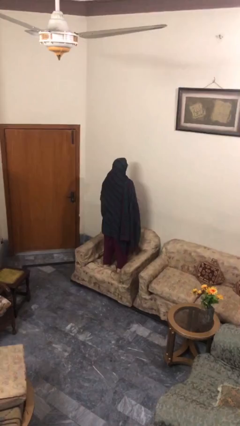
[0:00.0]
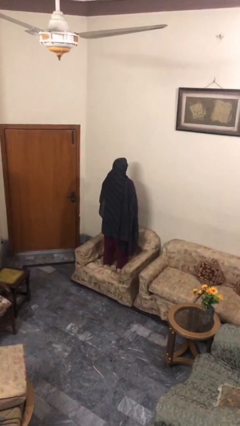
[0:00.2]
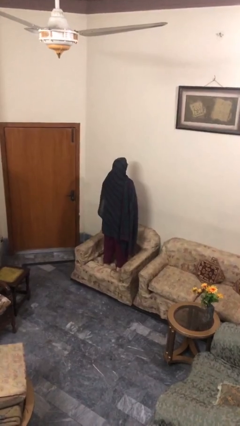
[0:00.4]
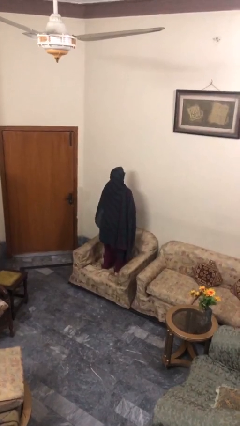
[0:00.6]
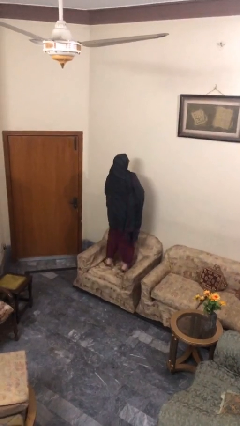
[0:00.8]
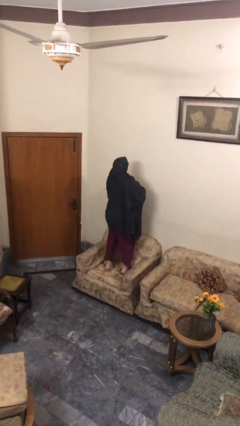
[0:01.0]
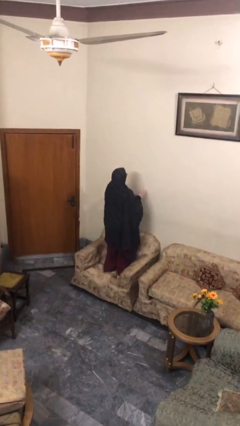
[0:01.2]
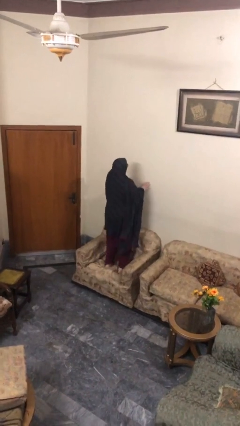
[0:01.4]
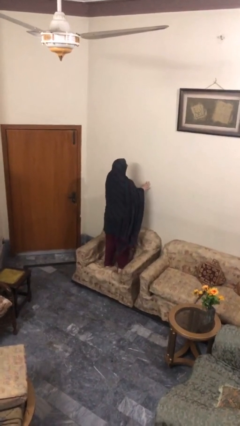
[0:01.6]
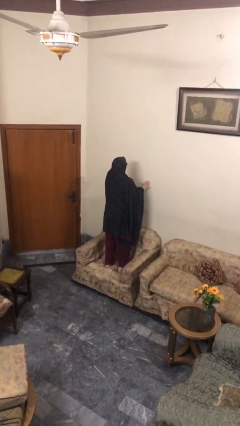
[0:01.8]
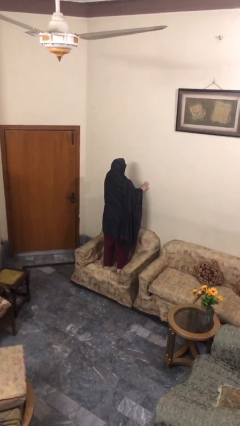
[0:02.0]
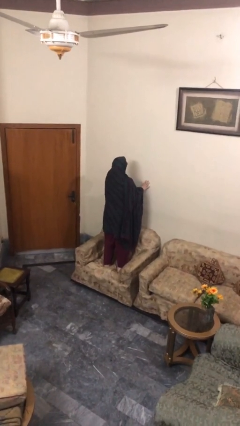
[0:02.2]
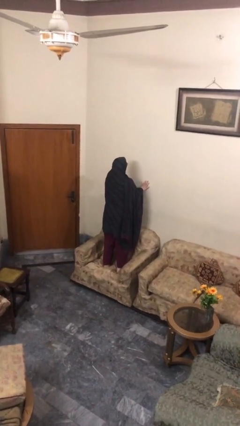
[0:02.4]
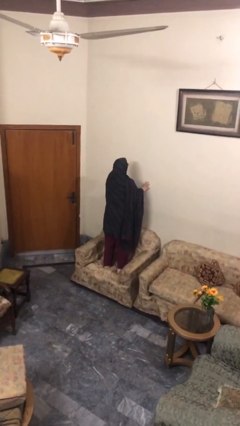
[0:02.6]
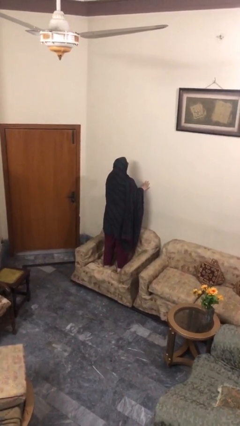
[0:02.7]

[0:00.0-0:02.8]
person jumps on couch

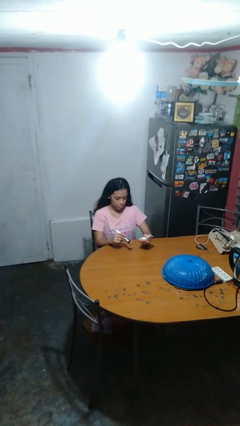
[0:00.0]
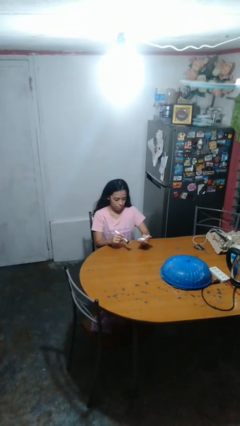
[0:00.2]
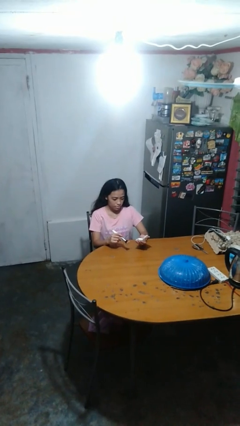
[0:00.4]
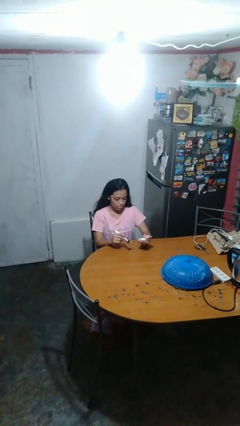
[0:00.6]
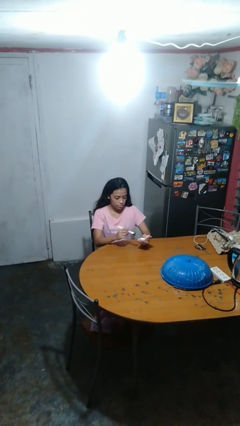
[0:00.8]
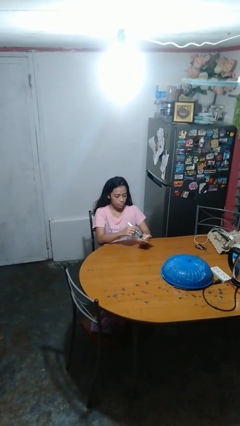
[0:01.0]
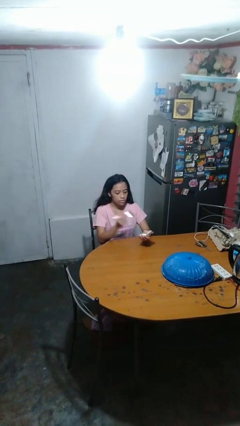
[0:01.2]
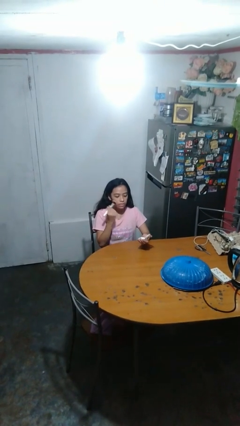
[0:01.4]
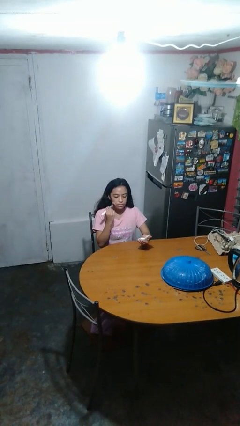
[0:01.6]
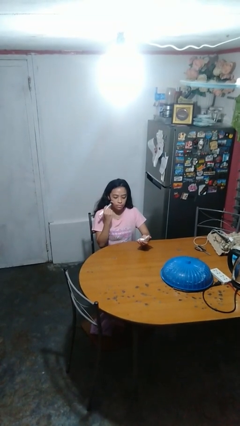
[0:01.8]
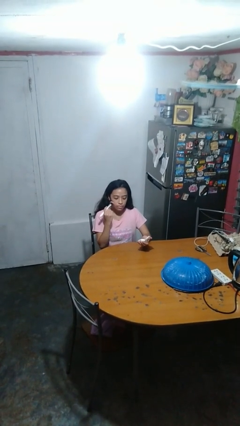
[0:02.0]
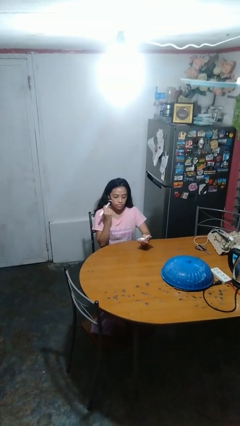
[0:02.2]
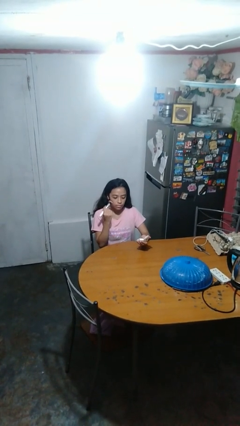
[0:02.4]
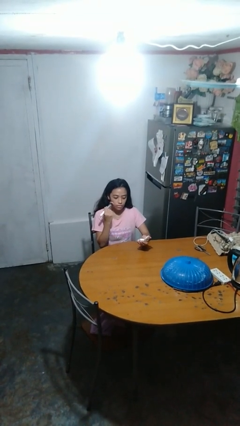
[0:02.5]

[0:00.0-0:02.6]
person applies foundation makeup

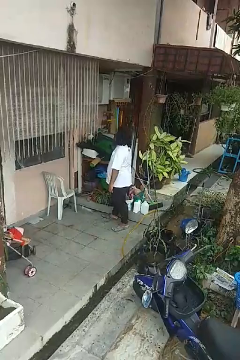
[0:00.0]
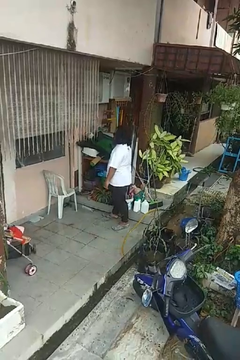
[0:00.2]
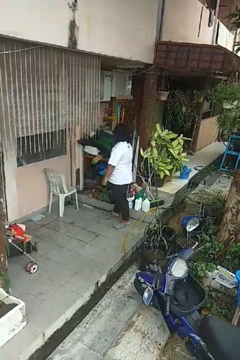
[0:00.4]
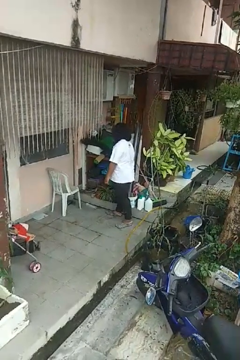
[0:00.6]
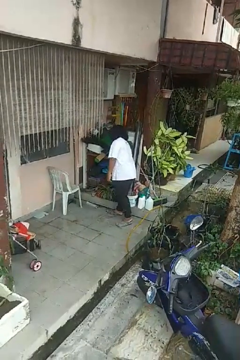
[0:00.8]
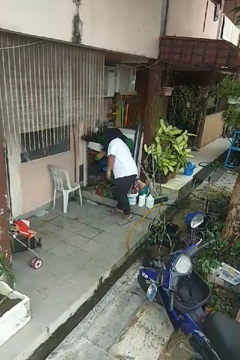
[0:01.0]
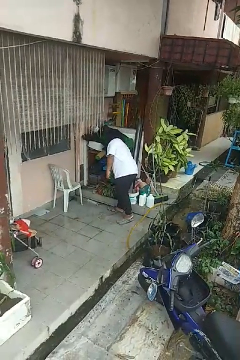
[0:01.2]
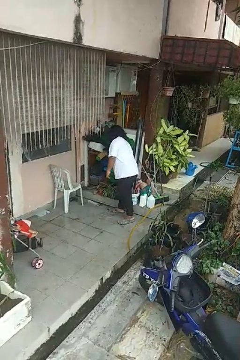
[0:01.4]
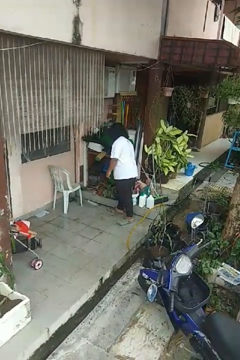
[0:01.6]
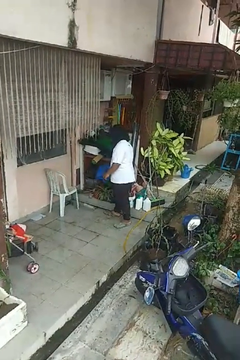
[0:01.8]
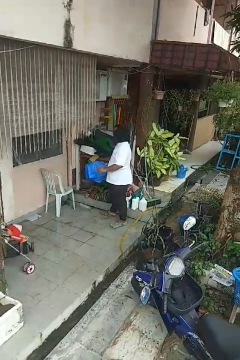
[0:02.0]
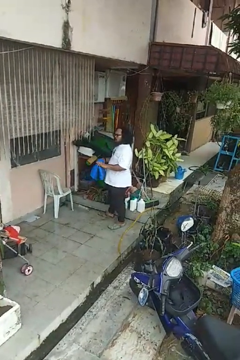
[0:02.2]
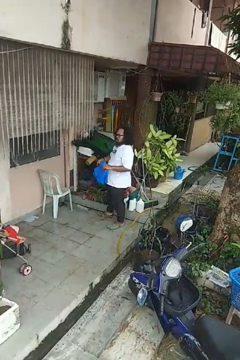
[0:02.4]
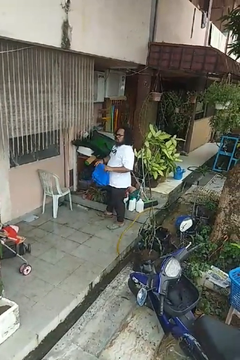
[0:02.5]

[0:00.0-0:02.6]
person picks up object from cabinet

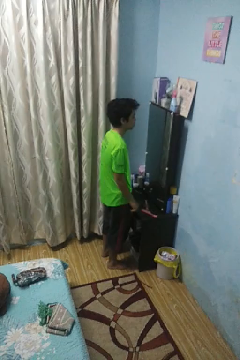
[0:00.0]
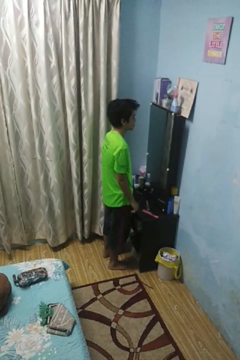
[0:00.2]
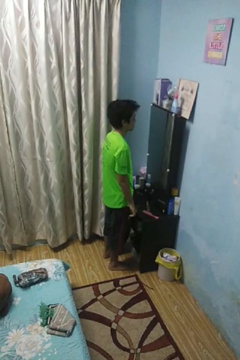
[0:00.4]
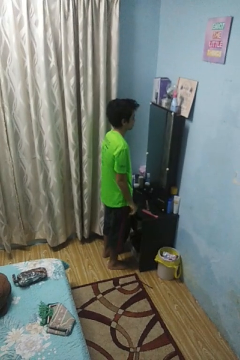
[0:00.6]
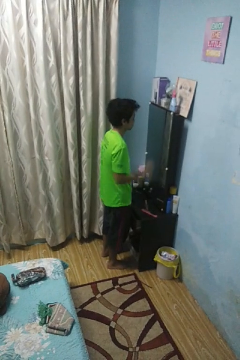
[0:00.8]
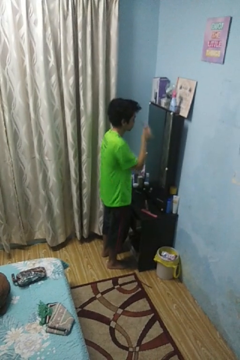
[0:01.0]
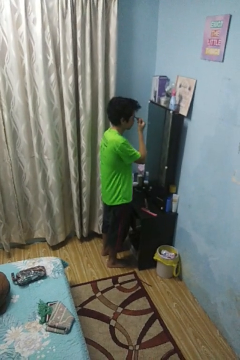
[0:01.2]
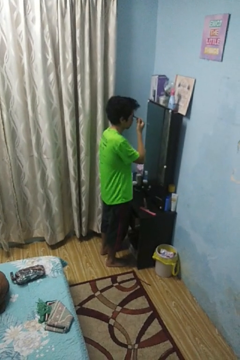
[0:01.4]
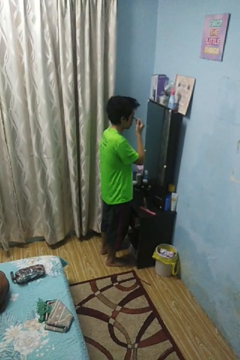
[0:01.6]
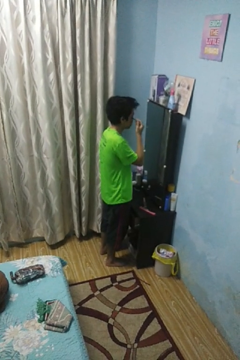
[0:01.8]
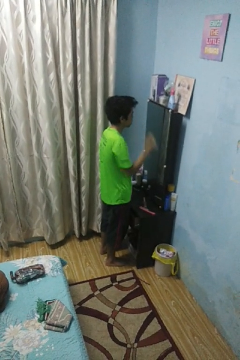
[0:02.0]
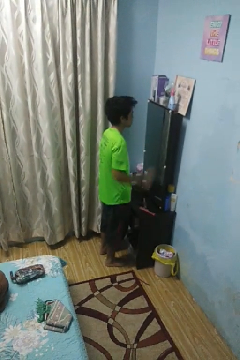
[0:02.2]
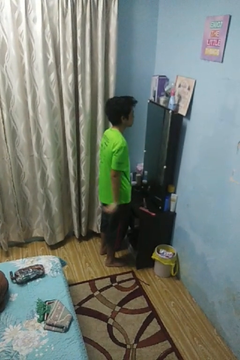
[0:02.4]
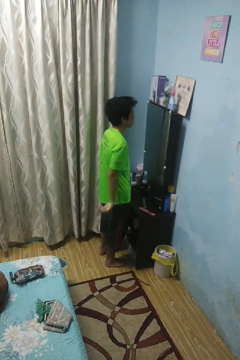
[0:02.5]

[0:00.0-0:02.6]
person applies eye makeup

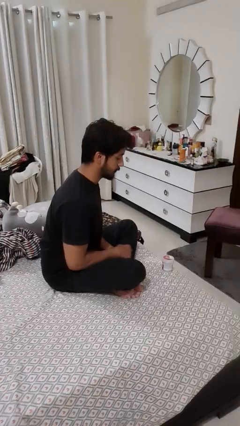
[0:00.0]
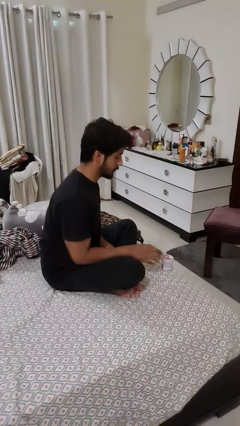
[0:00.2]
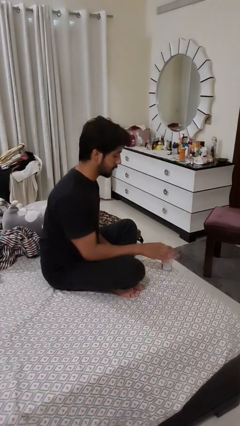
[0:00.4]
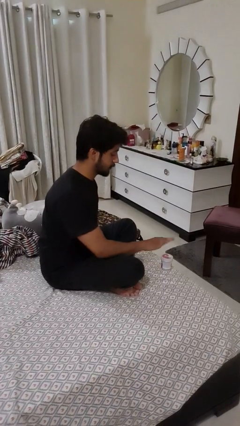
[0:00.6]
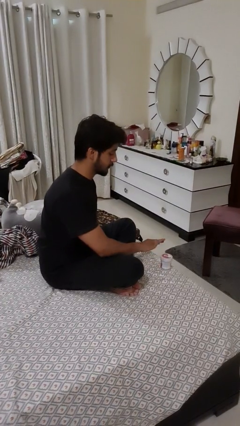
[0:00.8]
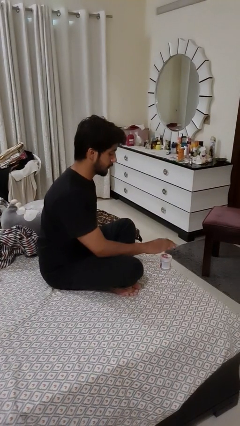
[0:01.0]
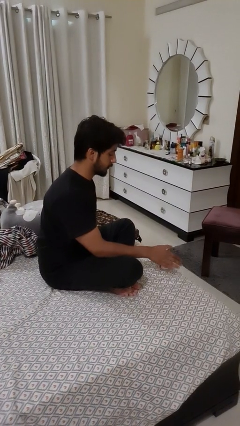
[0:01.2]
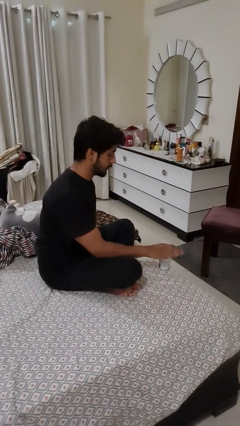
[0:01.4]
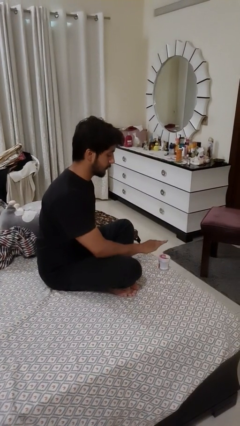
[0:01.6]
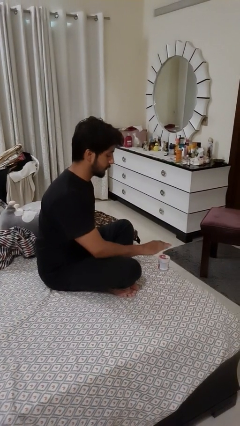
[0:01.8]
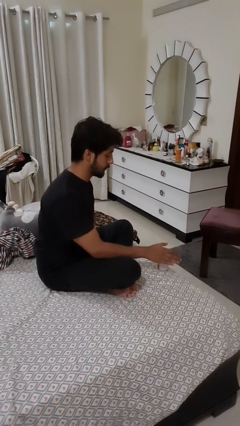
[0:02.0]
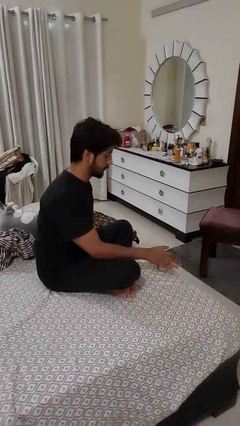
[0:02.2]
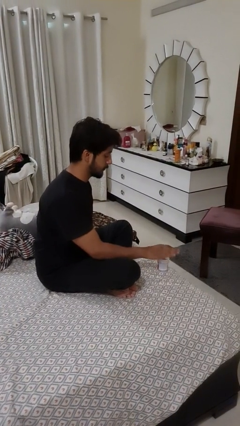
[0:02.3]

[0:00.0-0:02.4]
person waves hand over object

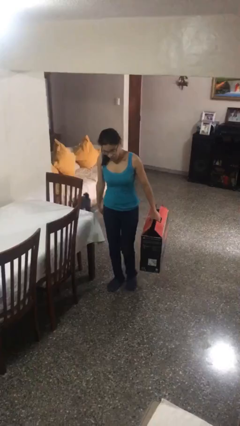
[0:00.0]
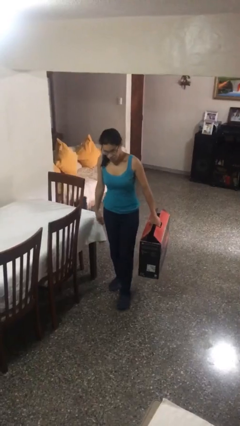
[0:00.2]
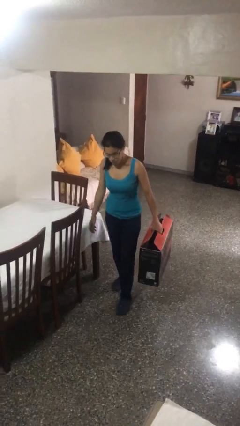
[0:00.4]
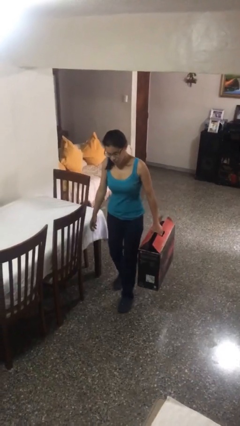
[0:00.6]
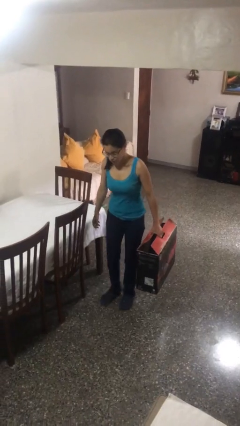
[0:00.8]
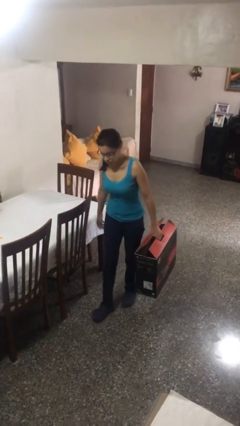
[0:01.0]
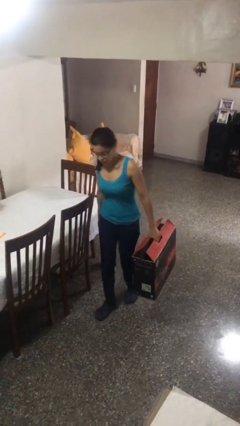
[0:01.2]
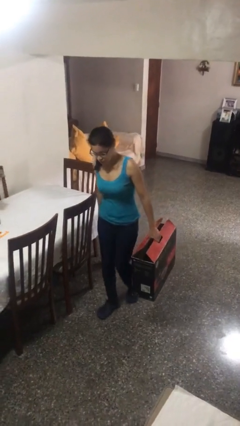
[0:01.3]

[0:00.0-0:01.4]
person carries heavy object

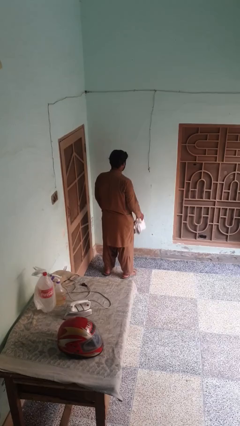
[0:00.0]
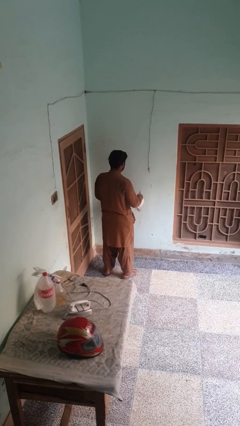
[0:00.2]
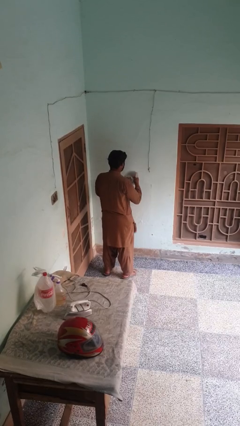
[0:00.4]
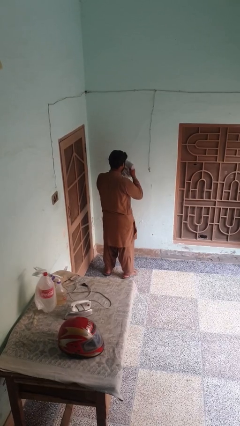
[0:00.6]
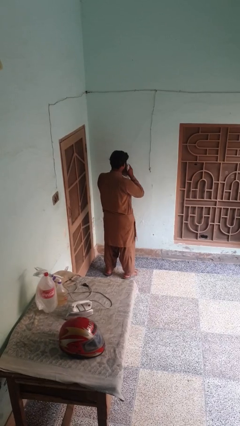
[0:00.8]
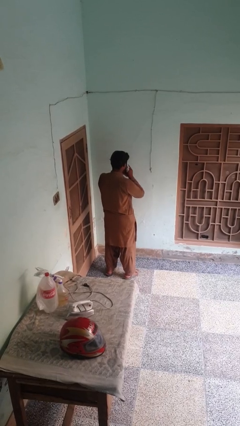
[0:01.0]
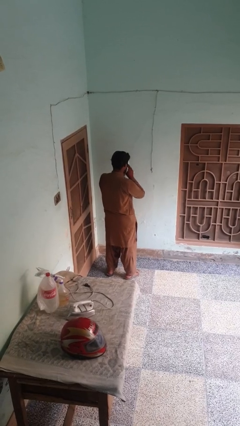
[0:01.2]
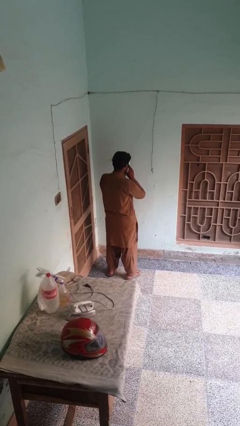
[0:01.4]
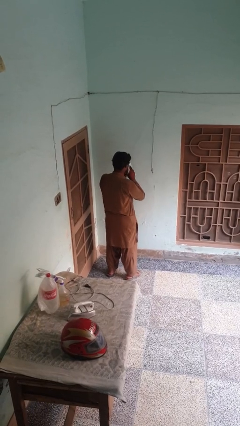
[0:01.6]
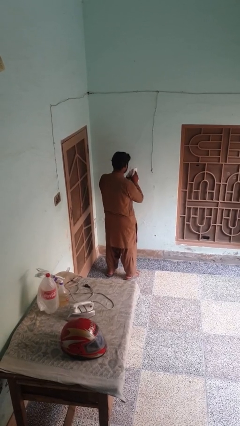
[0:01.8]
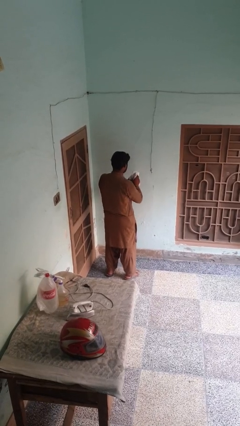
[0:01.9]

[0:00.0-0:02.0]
person blows nose

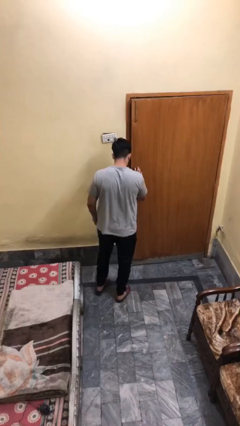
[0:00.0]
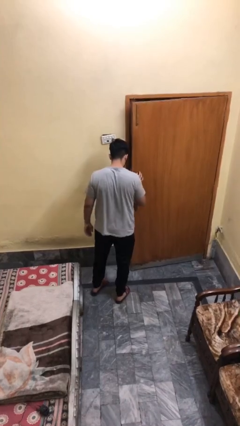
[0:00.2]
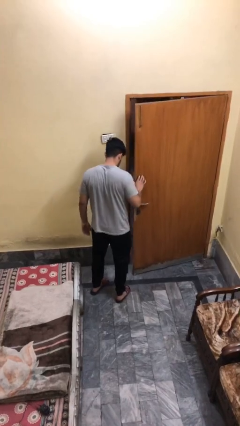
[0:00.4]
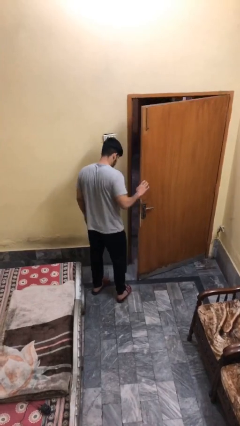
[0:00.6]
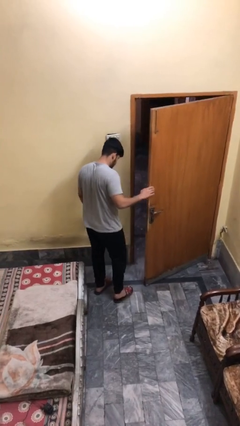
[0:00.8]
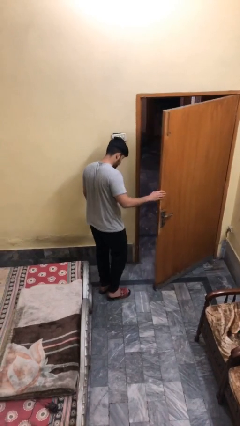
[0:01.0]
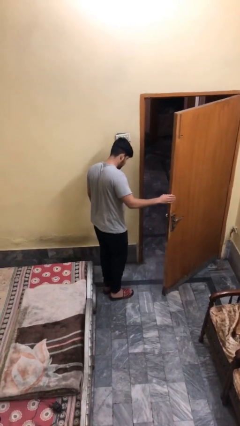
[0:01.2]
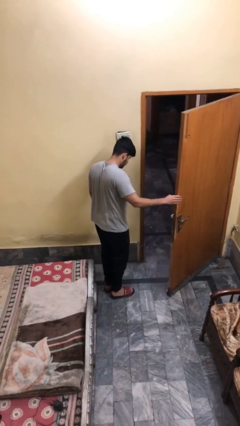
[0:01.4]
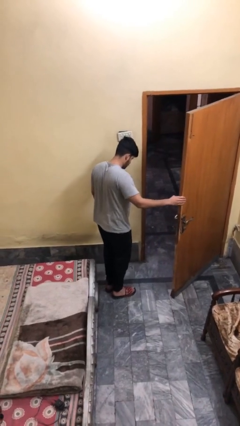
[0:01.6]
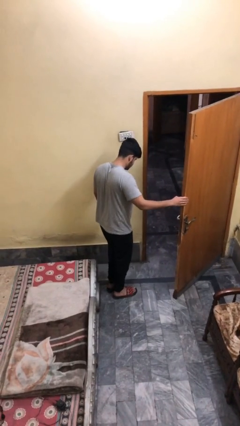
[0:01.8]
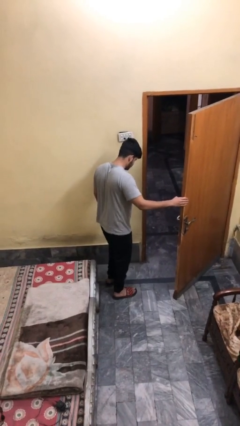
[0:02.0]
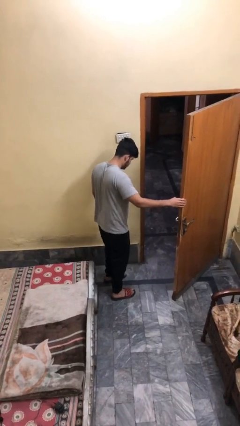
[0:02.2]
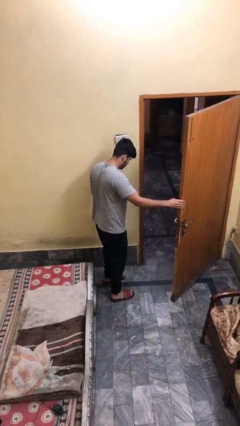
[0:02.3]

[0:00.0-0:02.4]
person opens facility door
